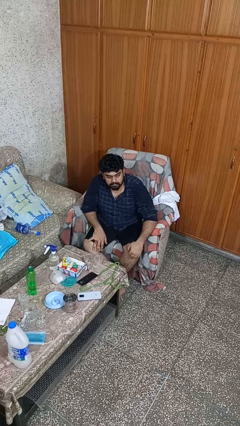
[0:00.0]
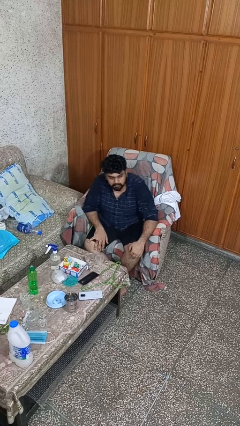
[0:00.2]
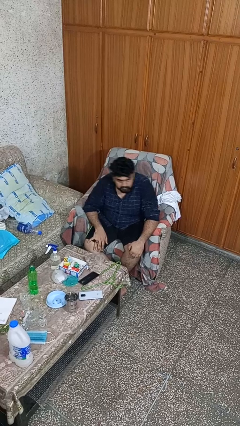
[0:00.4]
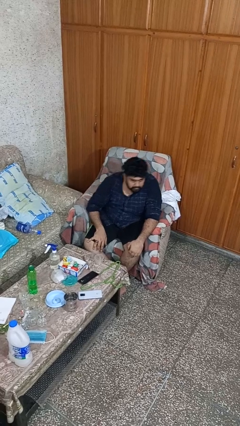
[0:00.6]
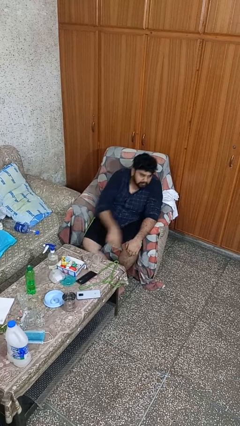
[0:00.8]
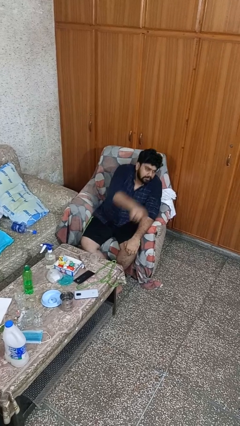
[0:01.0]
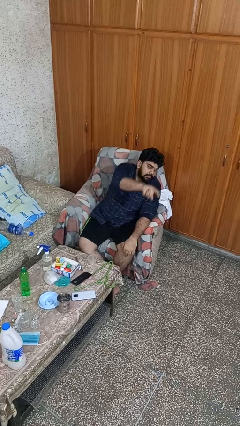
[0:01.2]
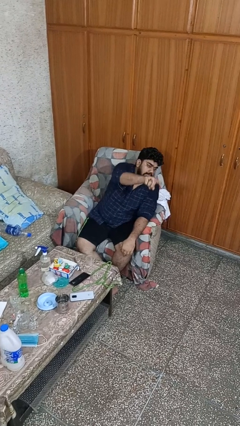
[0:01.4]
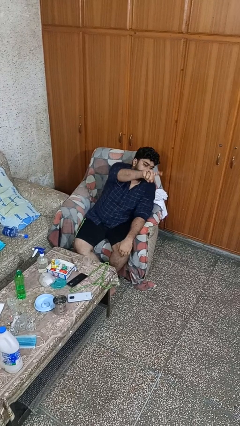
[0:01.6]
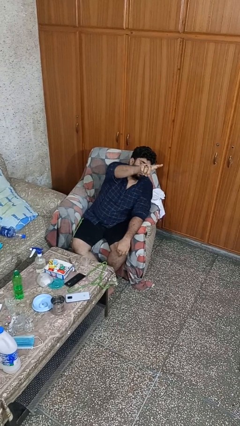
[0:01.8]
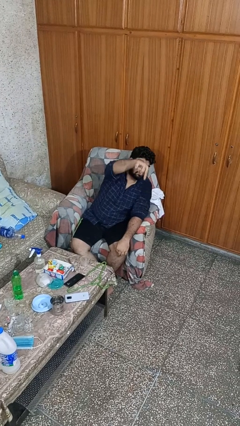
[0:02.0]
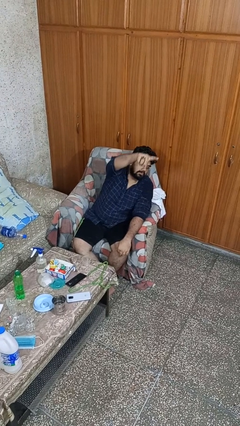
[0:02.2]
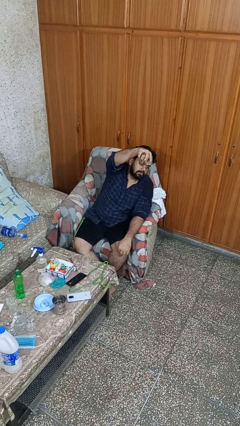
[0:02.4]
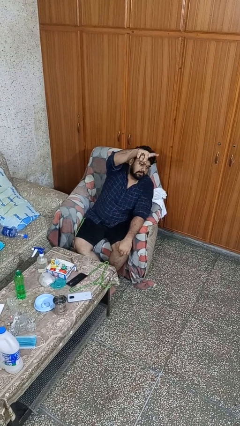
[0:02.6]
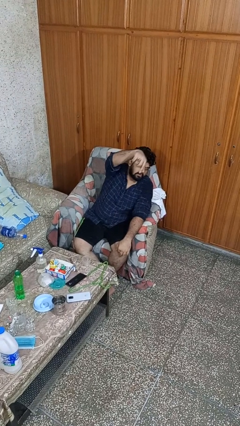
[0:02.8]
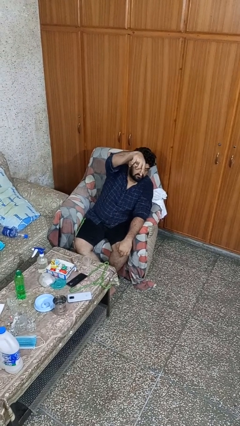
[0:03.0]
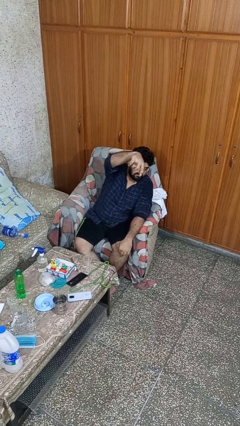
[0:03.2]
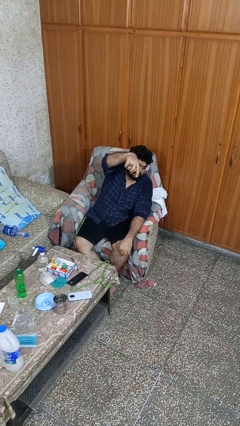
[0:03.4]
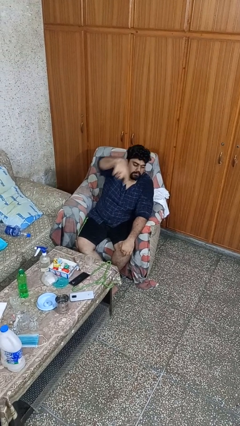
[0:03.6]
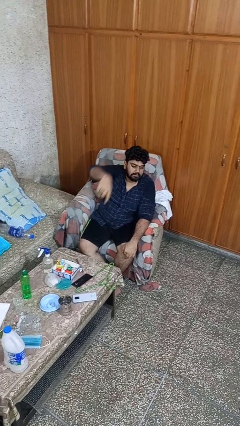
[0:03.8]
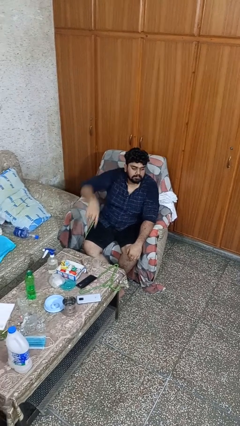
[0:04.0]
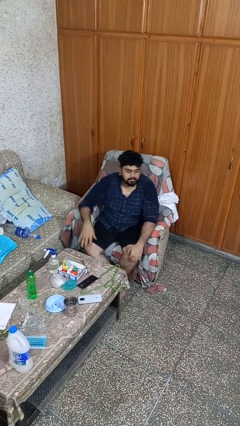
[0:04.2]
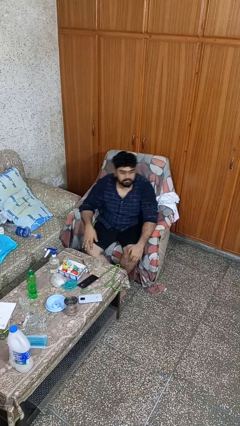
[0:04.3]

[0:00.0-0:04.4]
person points at person

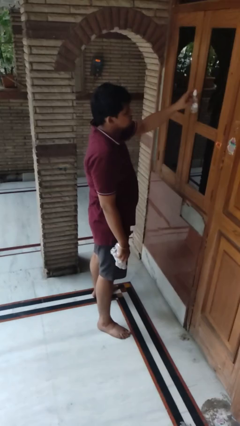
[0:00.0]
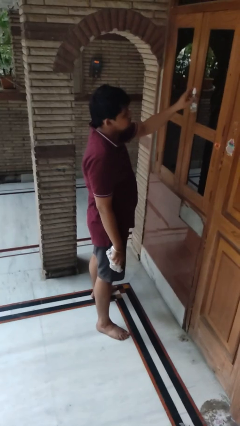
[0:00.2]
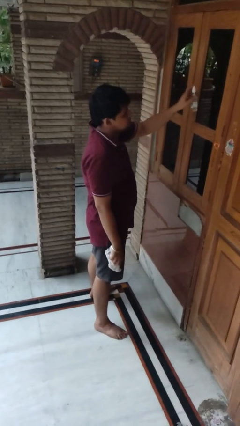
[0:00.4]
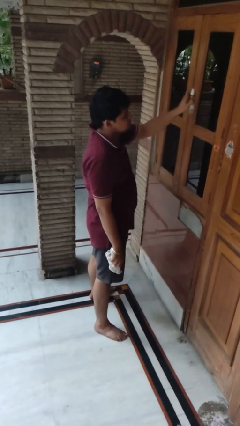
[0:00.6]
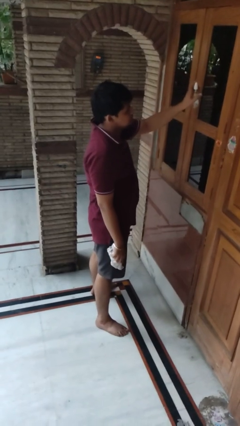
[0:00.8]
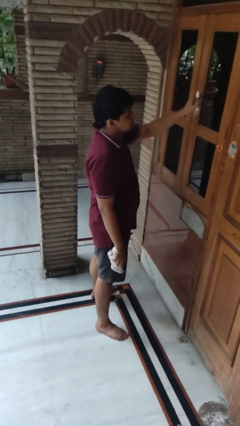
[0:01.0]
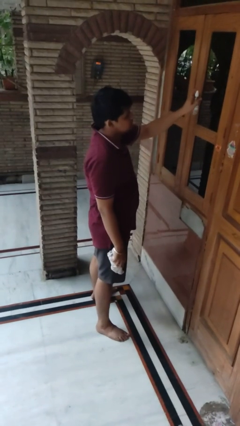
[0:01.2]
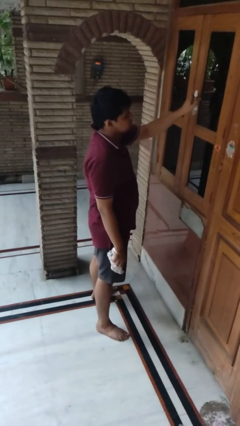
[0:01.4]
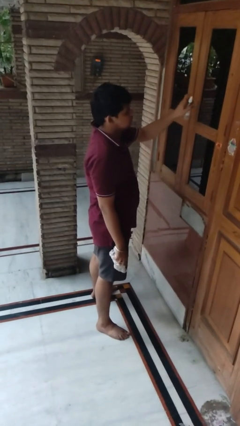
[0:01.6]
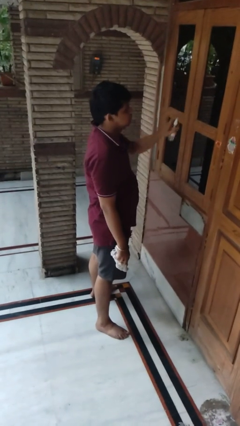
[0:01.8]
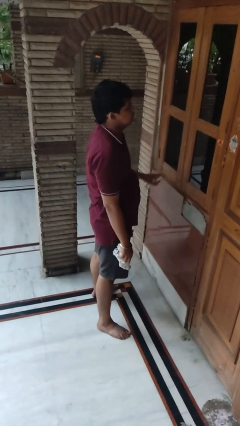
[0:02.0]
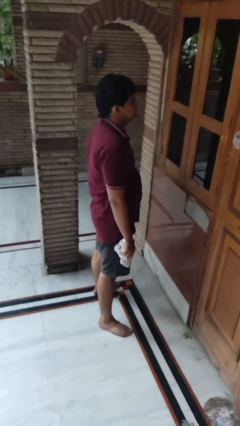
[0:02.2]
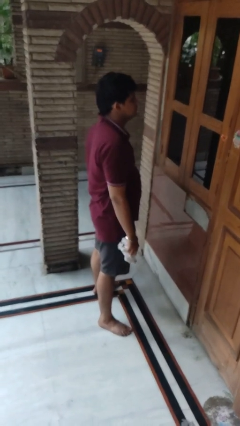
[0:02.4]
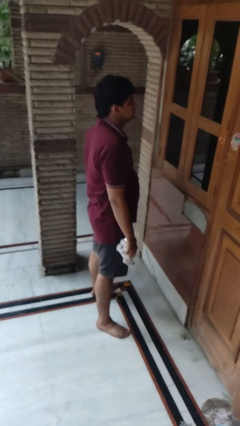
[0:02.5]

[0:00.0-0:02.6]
person sprays from bottle

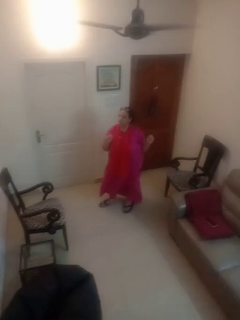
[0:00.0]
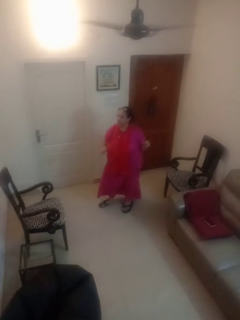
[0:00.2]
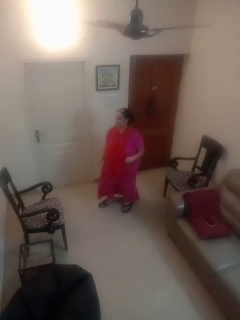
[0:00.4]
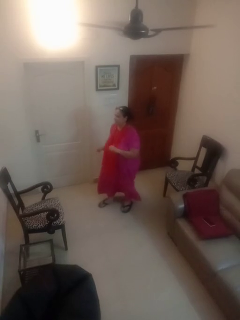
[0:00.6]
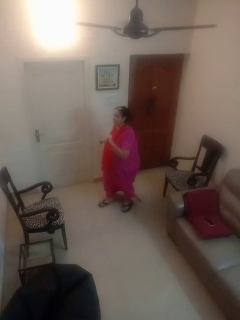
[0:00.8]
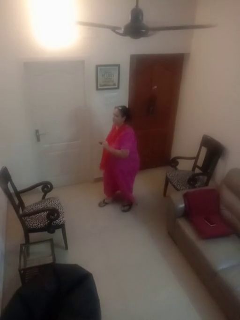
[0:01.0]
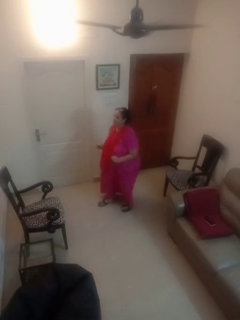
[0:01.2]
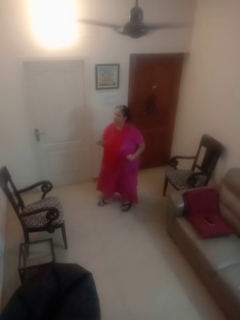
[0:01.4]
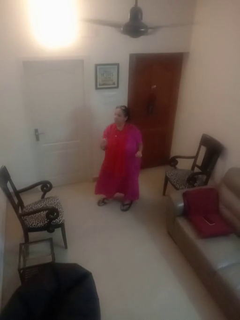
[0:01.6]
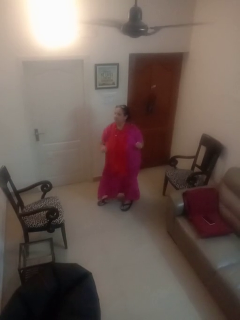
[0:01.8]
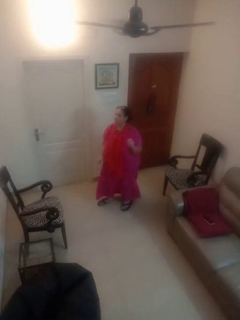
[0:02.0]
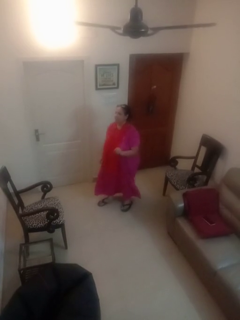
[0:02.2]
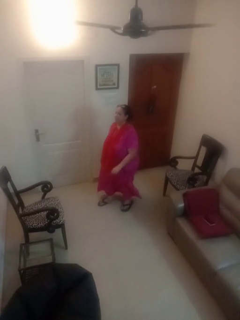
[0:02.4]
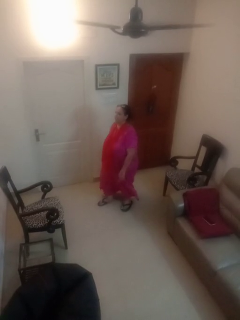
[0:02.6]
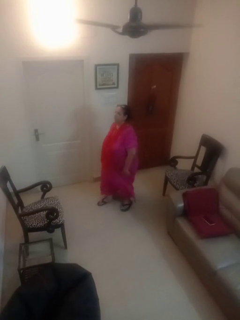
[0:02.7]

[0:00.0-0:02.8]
person dances in place

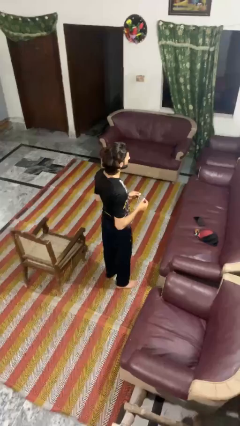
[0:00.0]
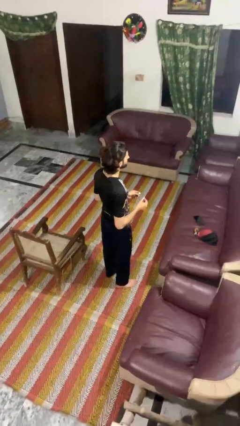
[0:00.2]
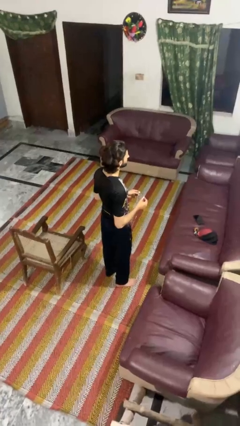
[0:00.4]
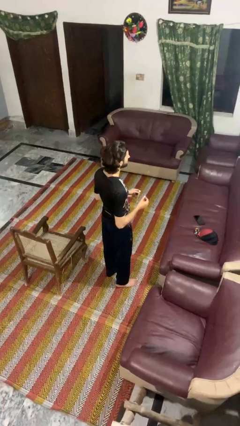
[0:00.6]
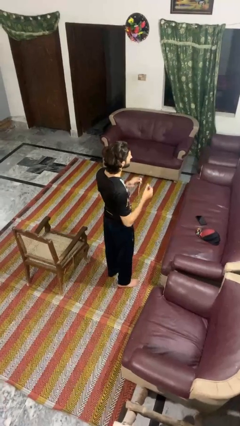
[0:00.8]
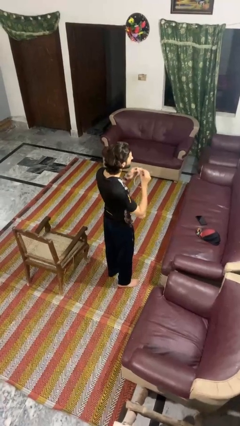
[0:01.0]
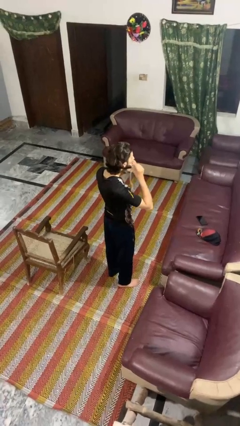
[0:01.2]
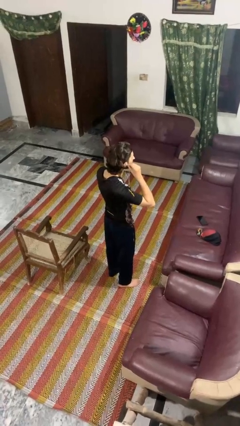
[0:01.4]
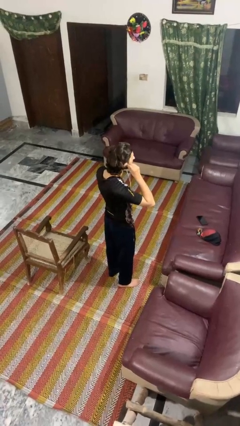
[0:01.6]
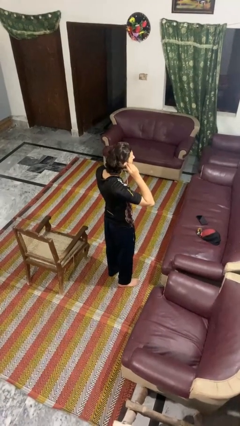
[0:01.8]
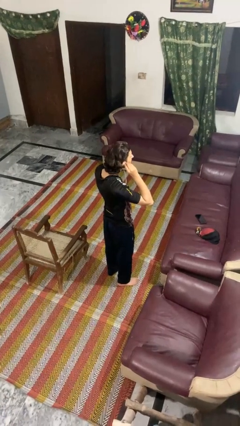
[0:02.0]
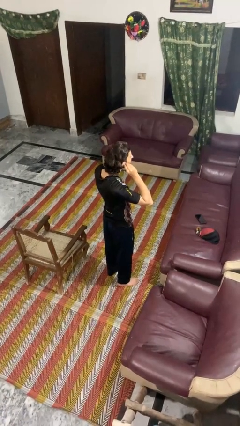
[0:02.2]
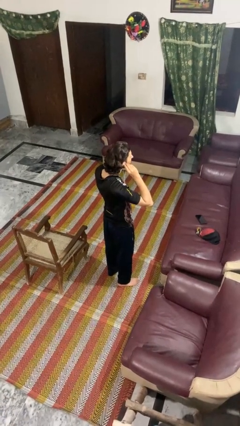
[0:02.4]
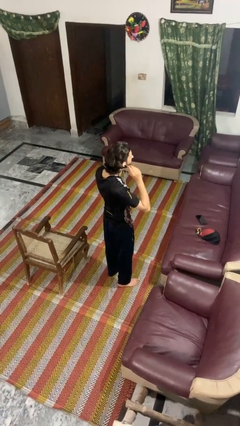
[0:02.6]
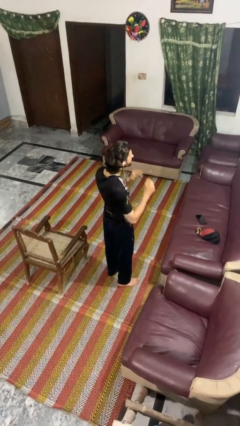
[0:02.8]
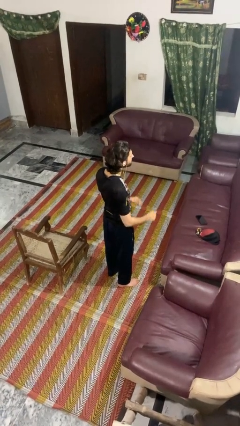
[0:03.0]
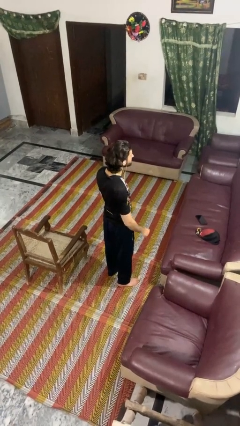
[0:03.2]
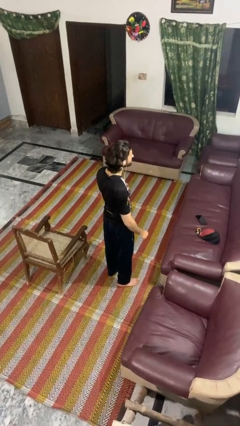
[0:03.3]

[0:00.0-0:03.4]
person puts on headphones

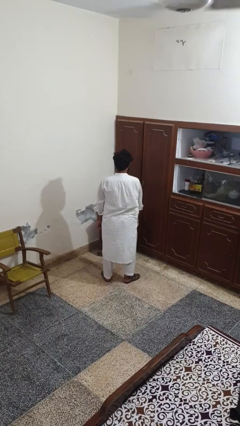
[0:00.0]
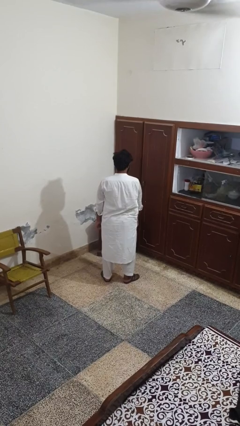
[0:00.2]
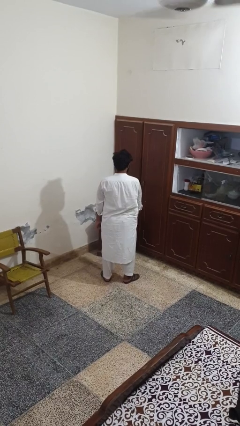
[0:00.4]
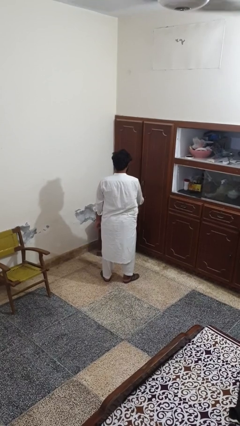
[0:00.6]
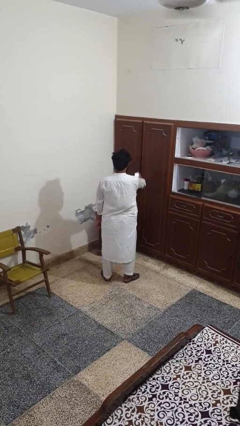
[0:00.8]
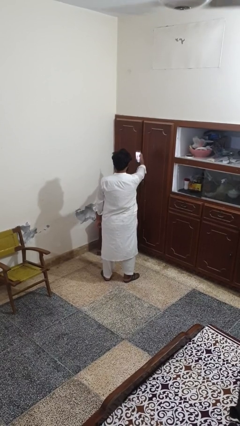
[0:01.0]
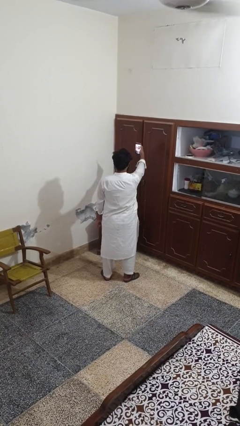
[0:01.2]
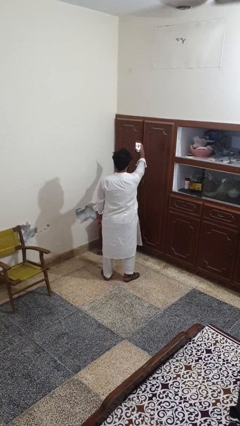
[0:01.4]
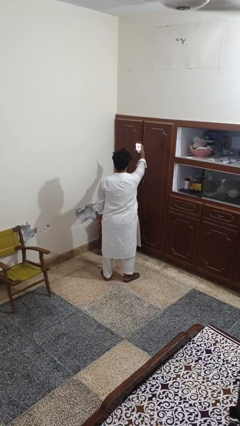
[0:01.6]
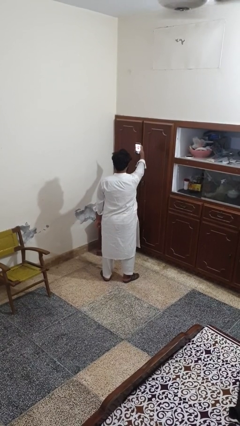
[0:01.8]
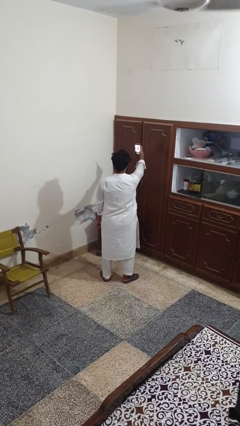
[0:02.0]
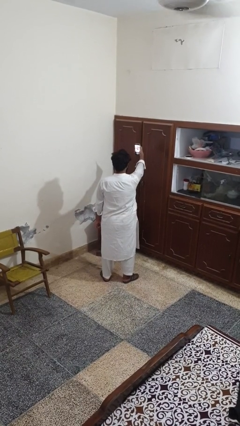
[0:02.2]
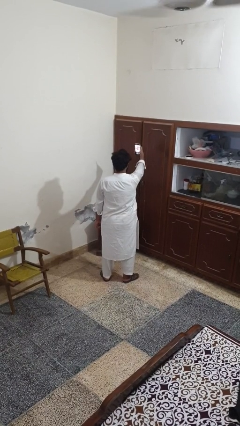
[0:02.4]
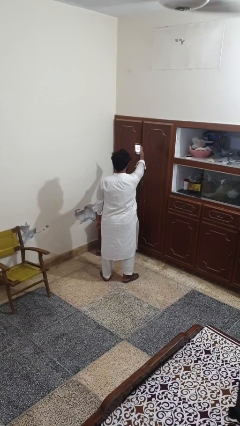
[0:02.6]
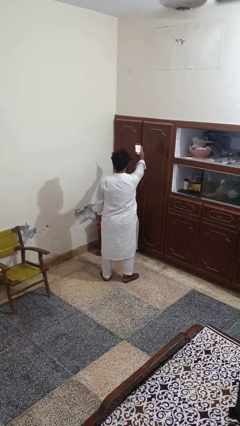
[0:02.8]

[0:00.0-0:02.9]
person takes selfie

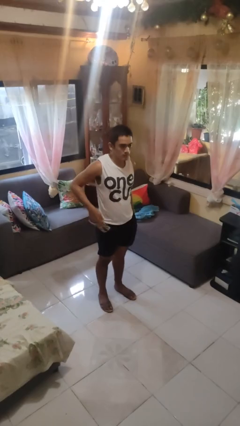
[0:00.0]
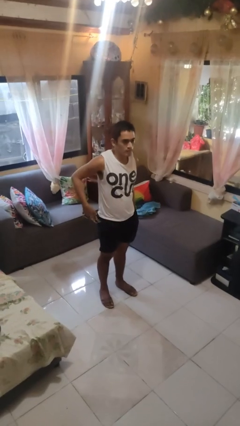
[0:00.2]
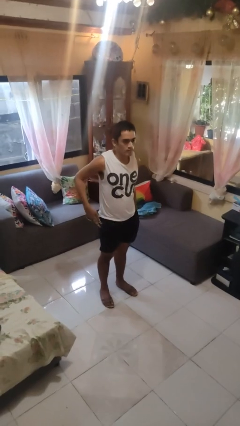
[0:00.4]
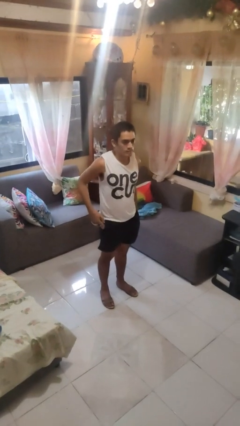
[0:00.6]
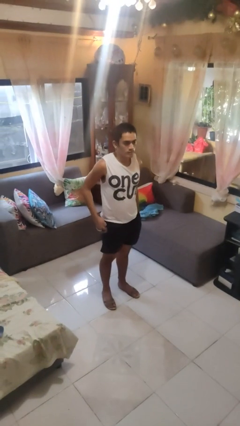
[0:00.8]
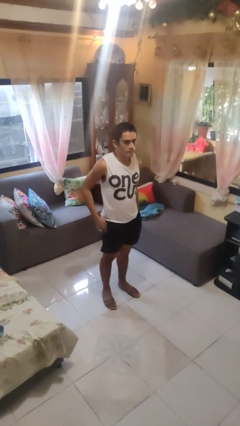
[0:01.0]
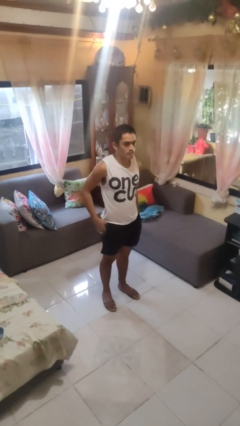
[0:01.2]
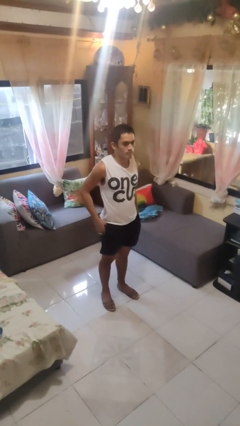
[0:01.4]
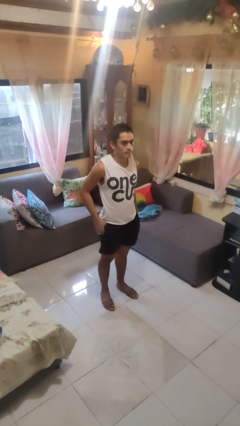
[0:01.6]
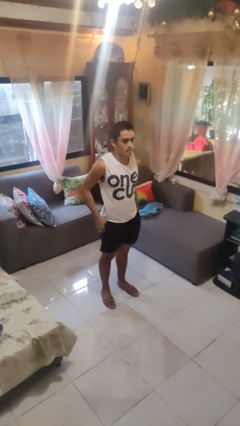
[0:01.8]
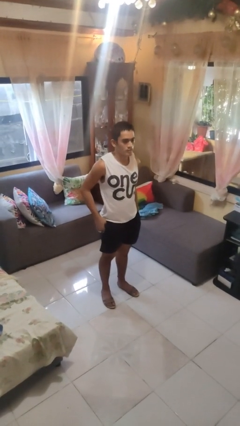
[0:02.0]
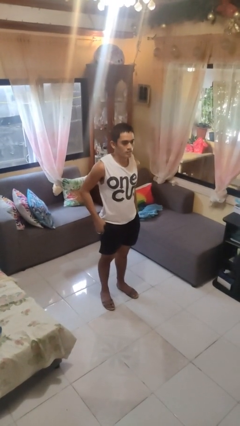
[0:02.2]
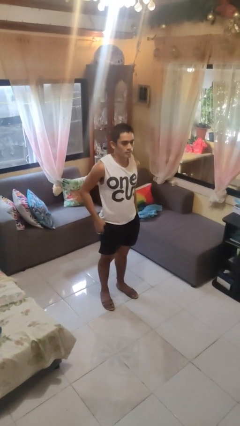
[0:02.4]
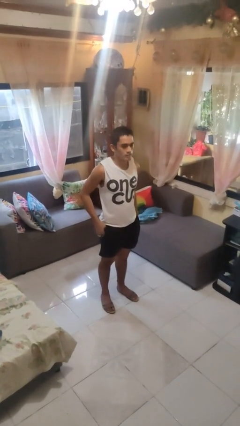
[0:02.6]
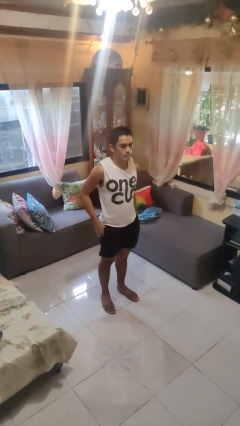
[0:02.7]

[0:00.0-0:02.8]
person puts phone into pocket
